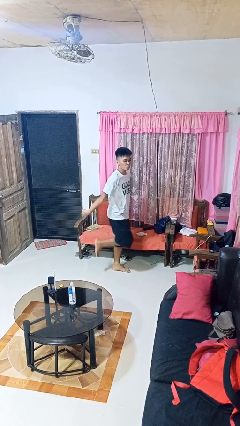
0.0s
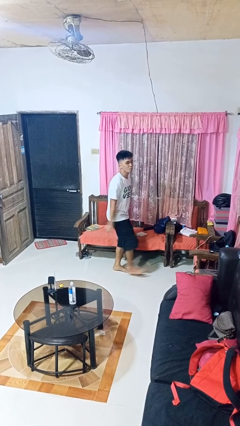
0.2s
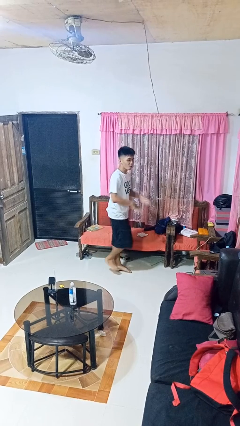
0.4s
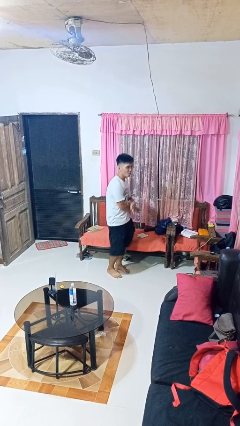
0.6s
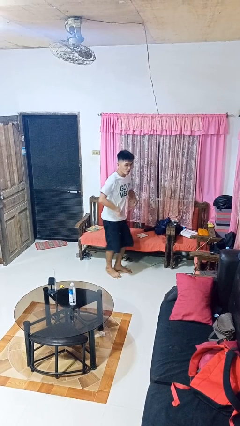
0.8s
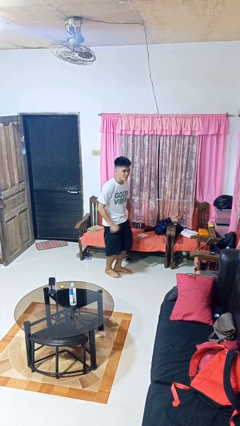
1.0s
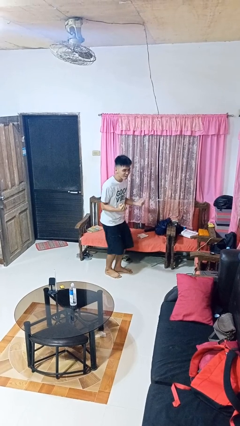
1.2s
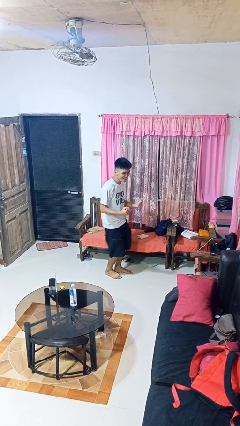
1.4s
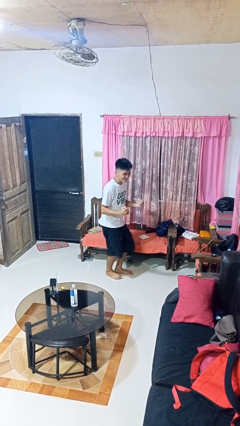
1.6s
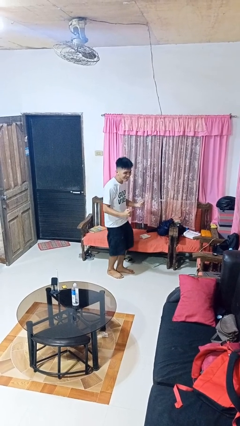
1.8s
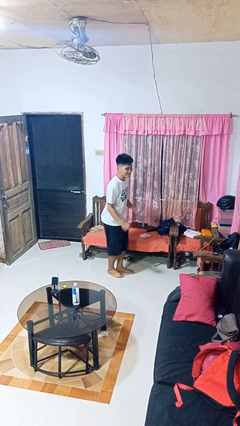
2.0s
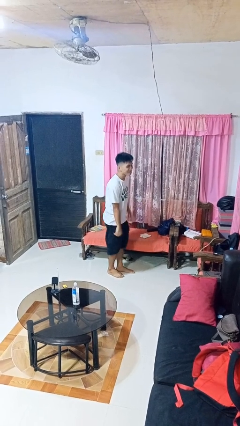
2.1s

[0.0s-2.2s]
person dances in place

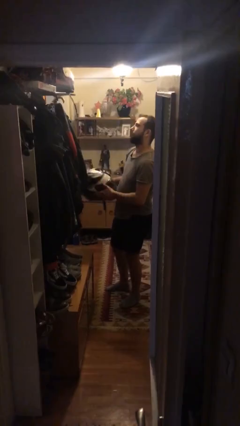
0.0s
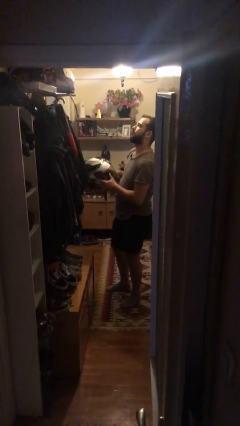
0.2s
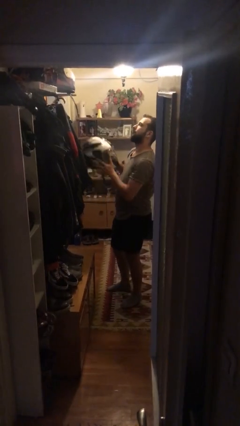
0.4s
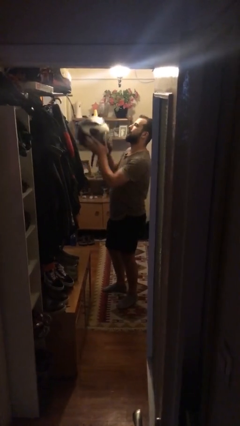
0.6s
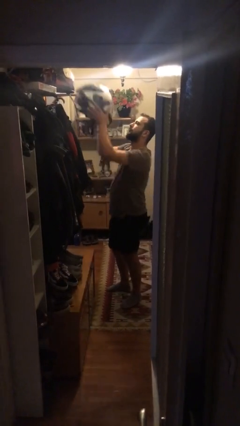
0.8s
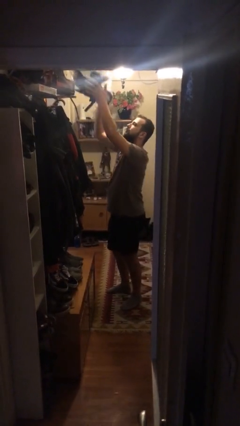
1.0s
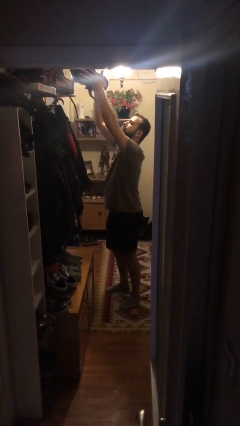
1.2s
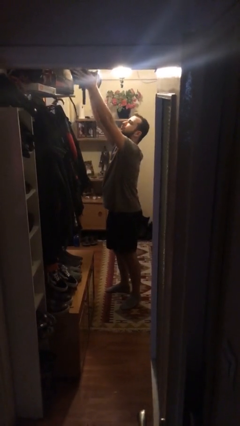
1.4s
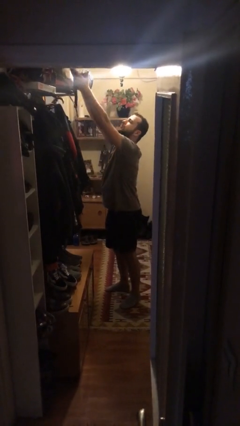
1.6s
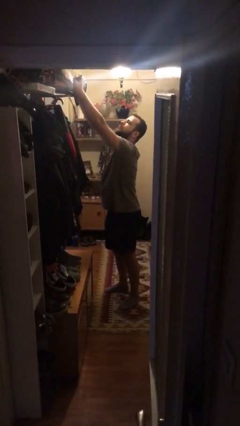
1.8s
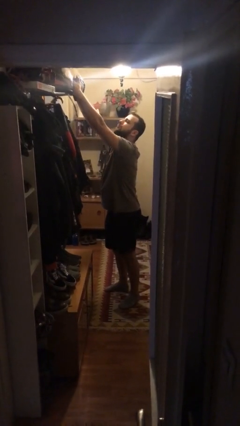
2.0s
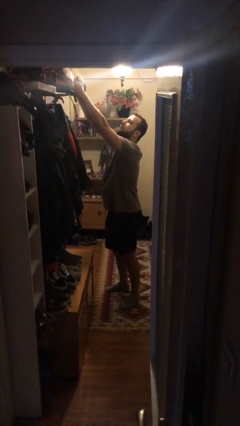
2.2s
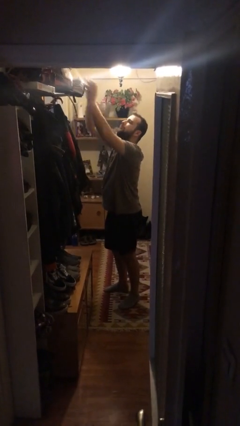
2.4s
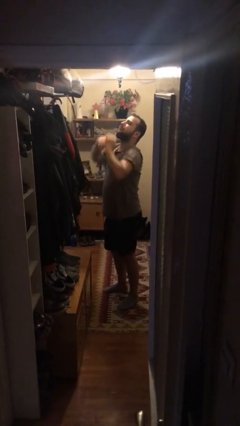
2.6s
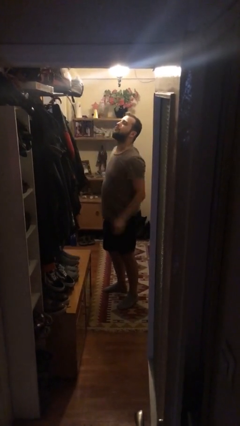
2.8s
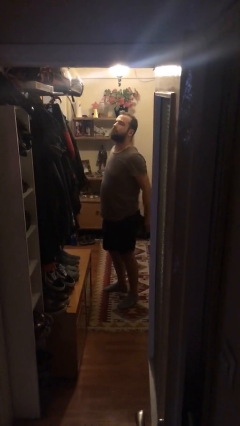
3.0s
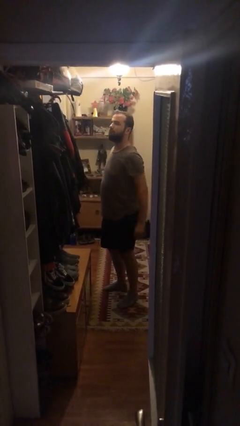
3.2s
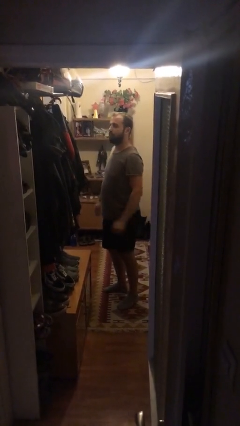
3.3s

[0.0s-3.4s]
person puts down object on shelf

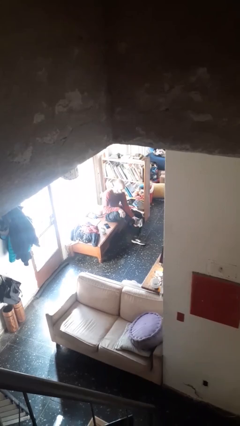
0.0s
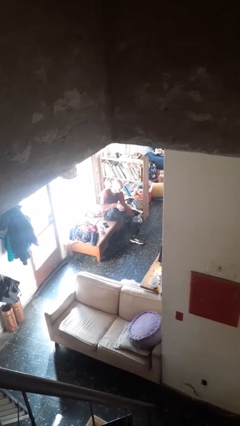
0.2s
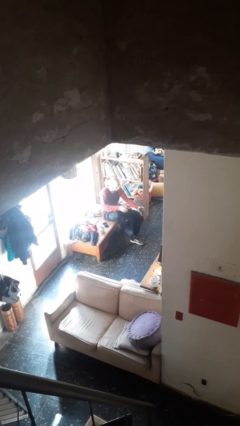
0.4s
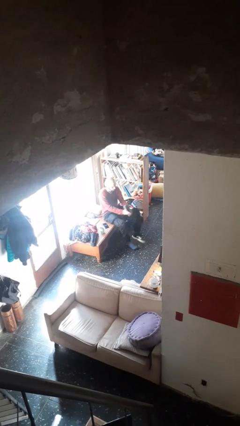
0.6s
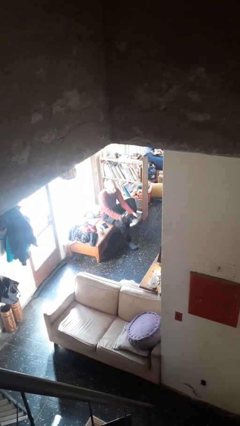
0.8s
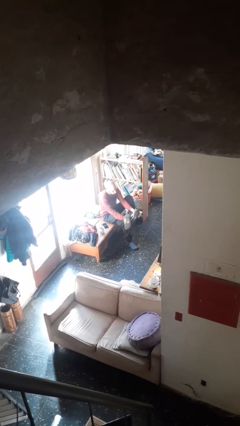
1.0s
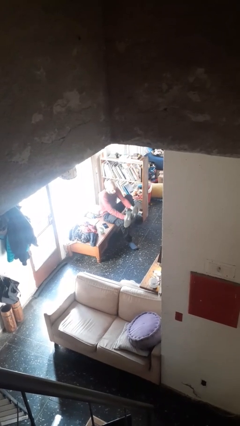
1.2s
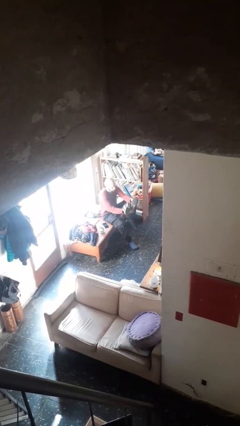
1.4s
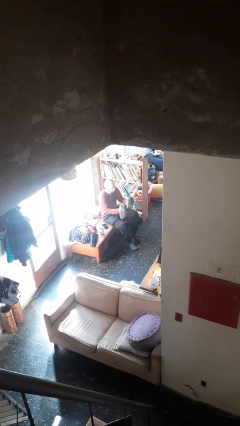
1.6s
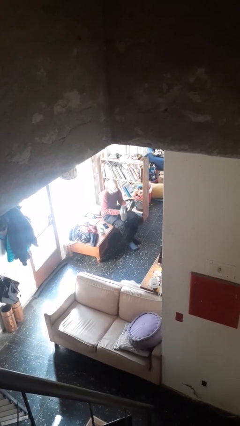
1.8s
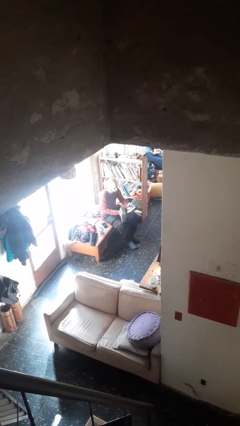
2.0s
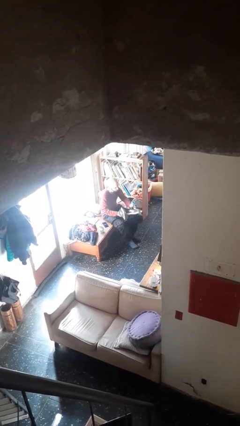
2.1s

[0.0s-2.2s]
person takes off shoes

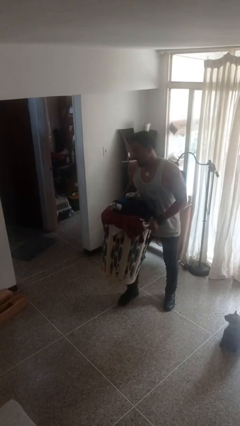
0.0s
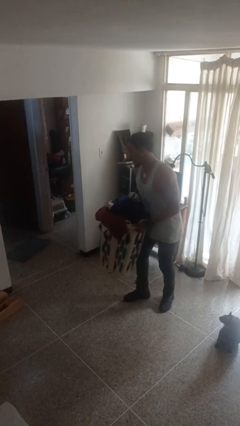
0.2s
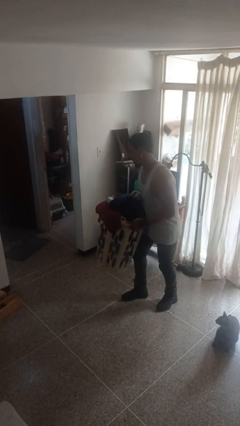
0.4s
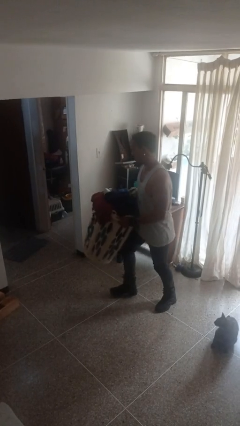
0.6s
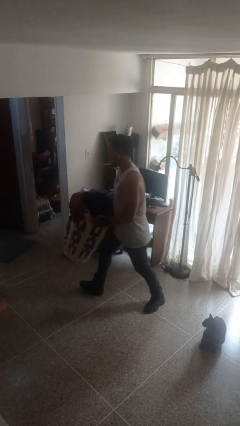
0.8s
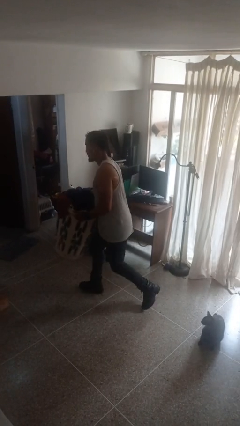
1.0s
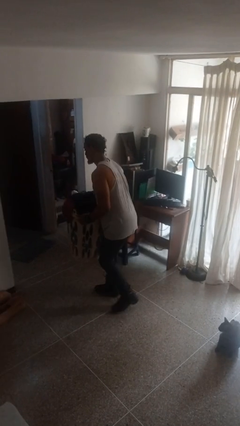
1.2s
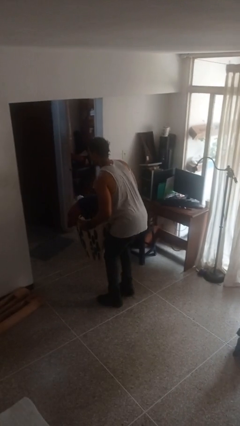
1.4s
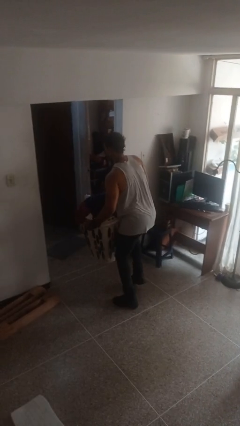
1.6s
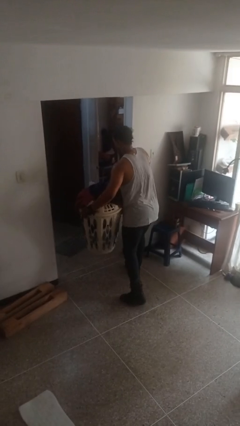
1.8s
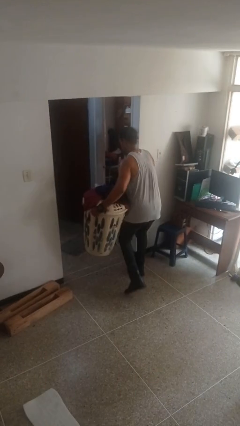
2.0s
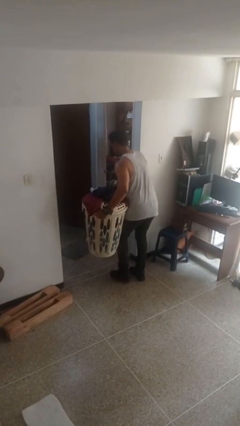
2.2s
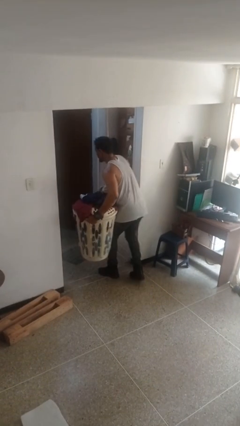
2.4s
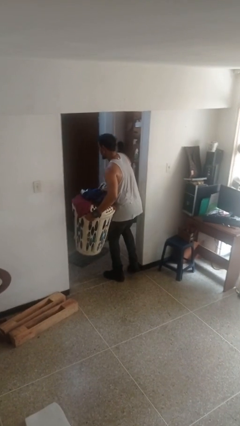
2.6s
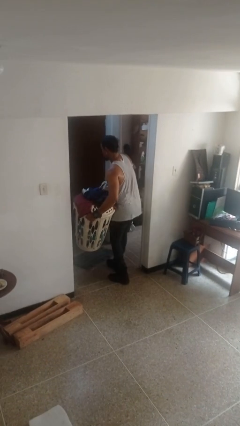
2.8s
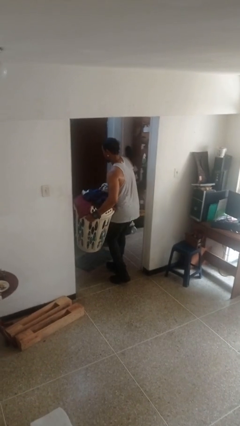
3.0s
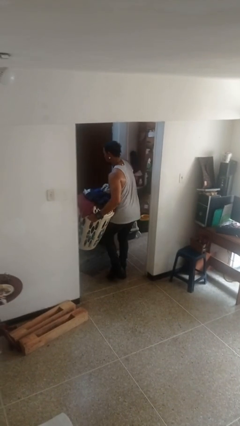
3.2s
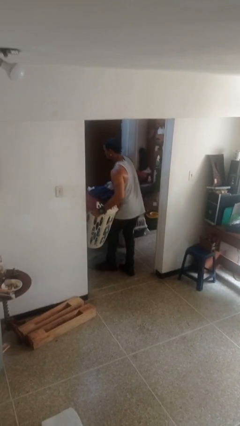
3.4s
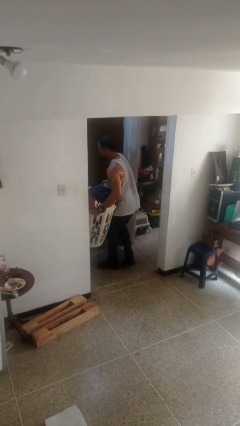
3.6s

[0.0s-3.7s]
person carries laundry basket

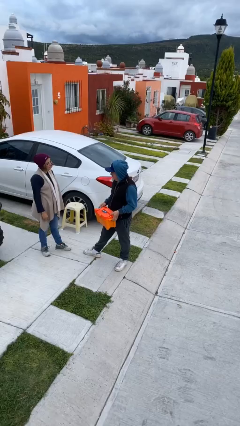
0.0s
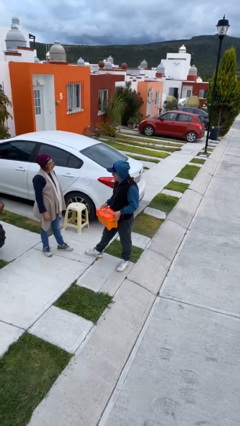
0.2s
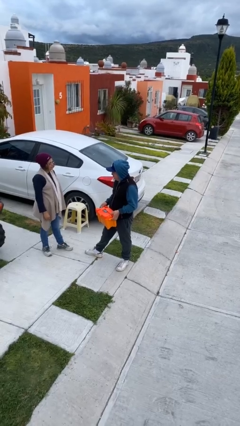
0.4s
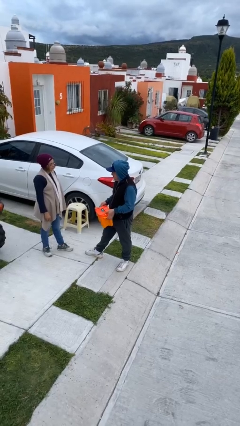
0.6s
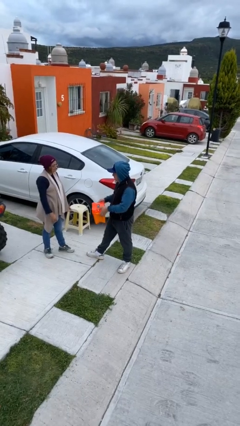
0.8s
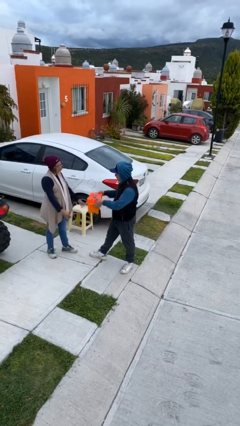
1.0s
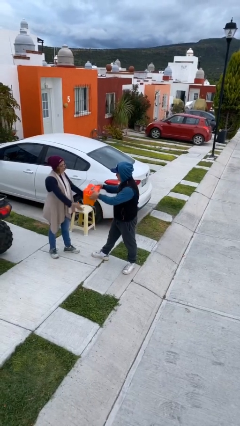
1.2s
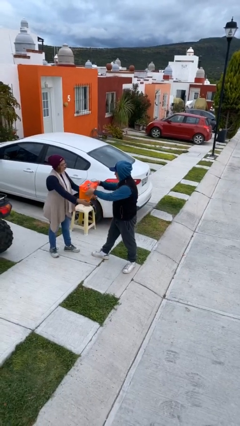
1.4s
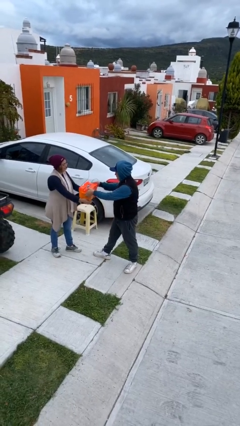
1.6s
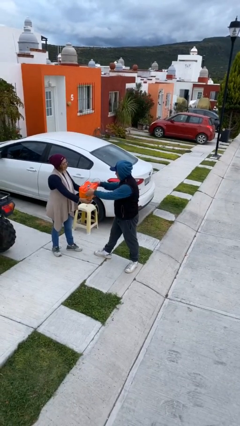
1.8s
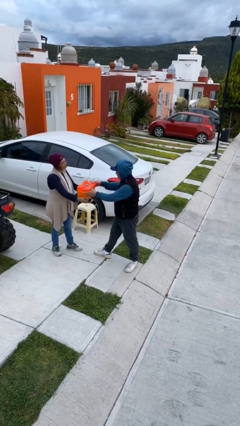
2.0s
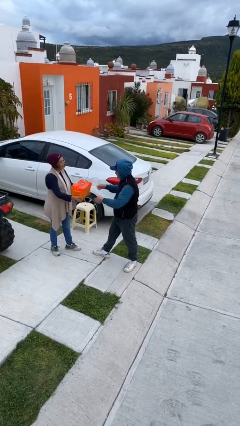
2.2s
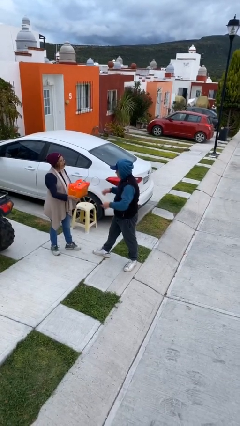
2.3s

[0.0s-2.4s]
person transfers object to person

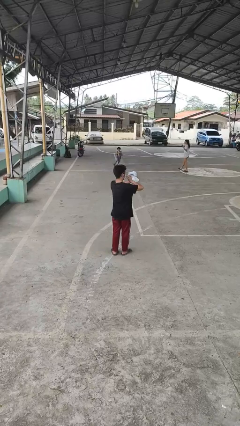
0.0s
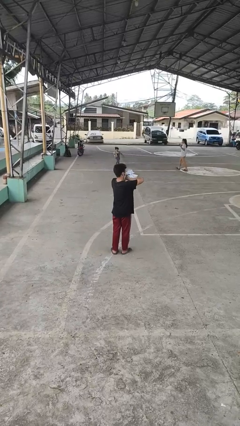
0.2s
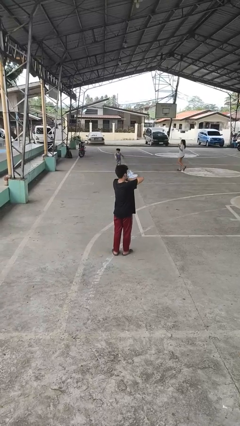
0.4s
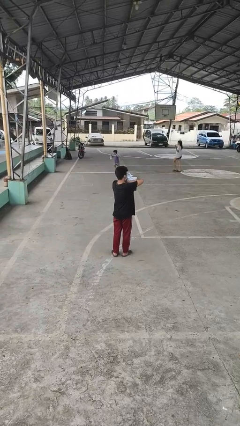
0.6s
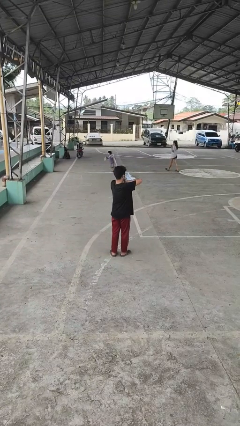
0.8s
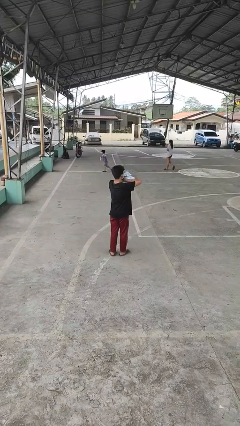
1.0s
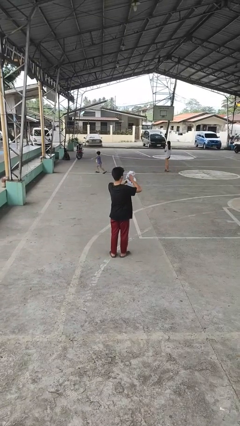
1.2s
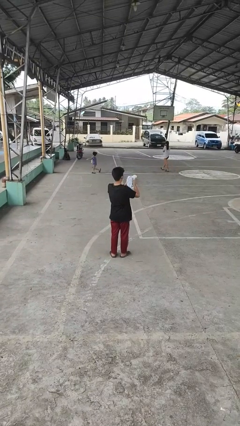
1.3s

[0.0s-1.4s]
person squeezes object

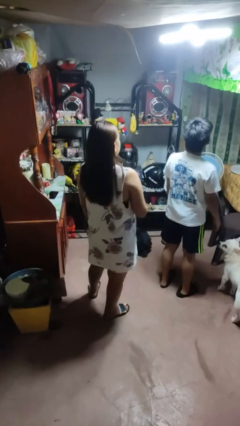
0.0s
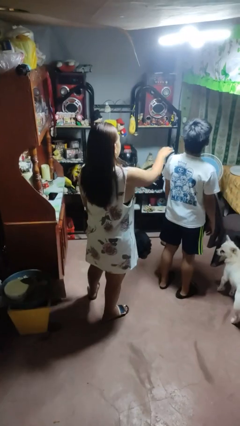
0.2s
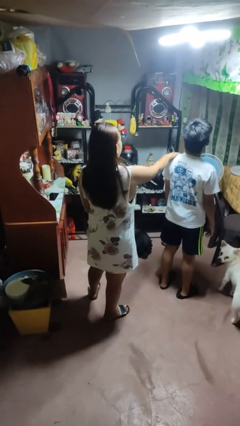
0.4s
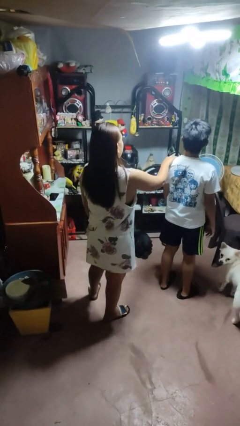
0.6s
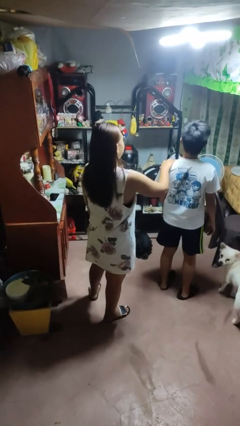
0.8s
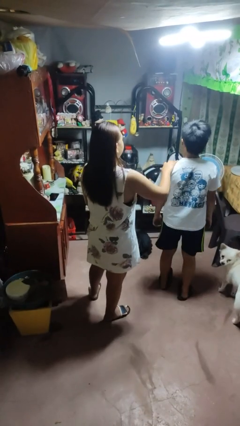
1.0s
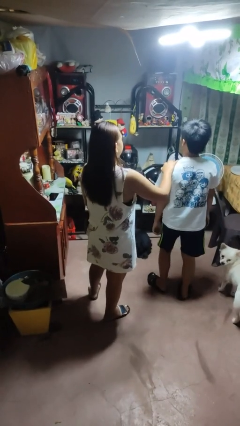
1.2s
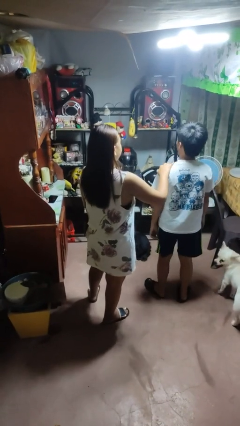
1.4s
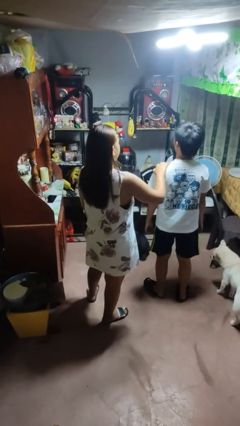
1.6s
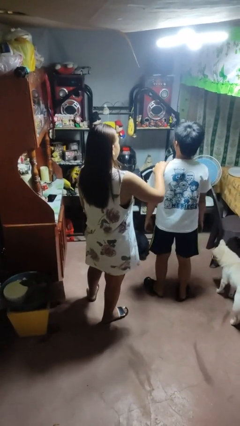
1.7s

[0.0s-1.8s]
person grabs person by shoulder

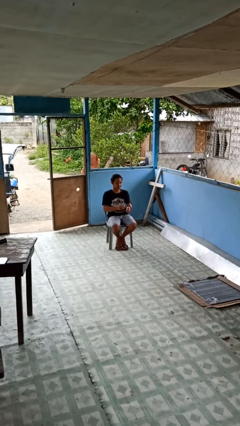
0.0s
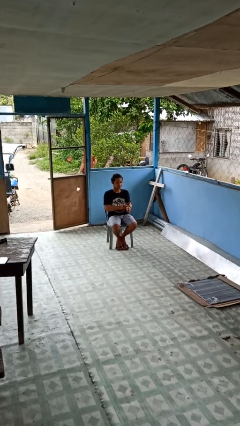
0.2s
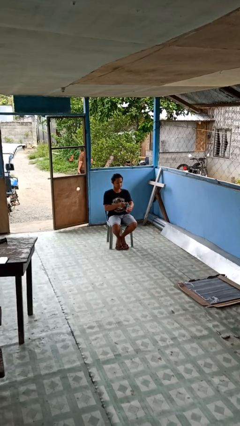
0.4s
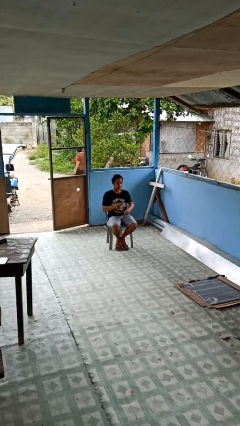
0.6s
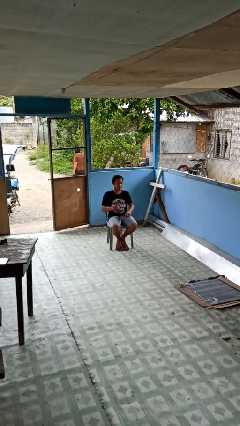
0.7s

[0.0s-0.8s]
person takes off wristwatch
